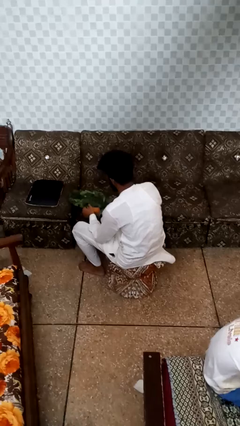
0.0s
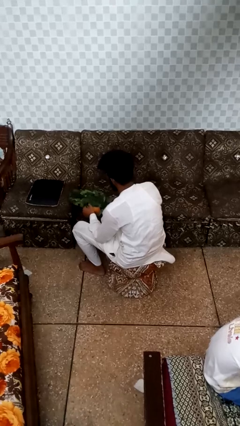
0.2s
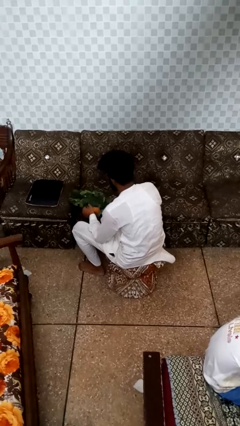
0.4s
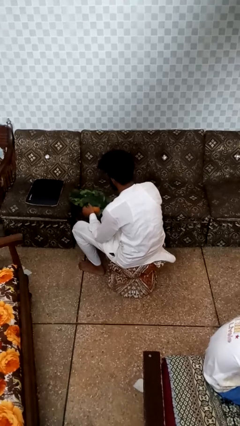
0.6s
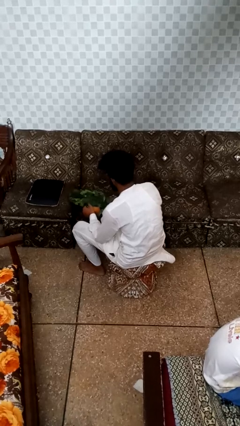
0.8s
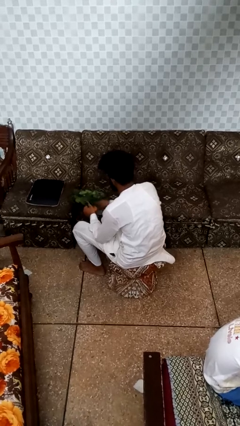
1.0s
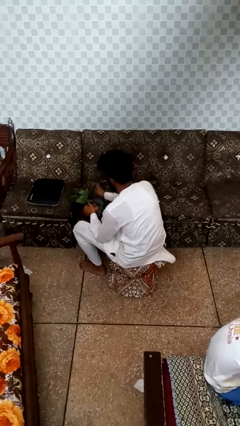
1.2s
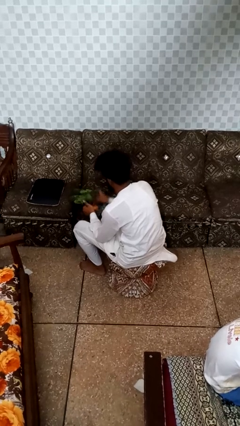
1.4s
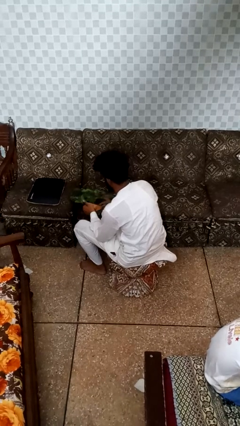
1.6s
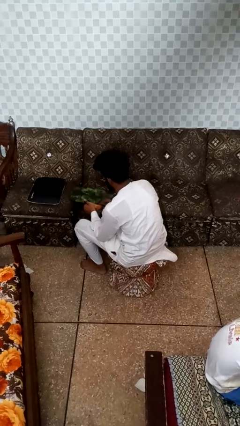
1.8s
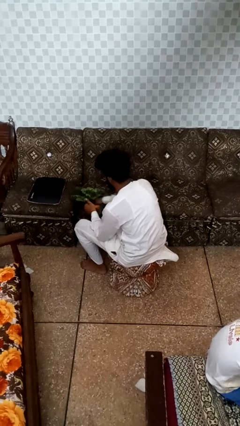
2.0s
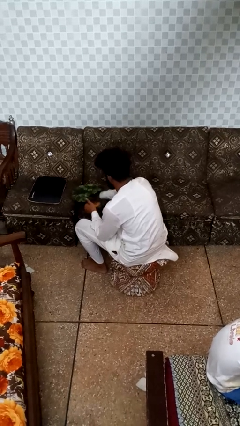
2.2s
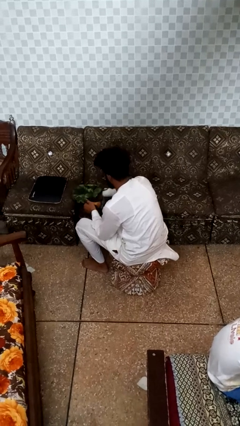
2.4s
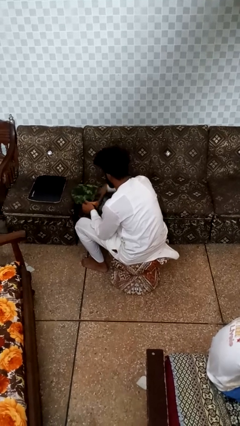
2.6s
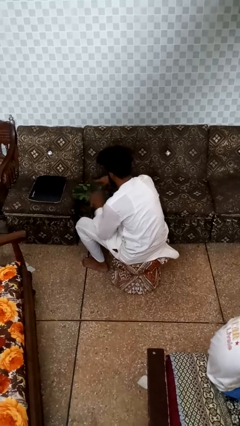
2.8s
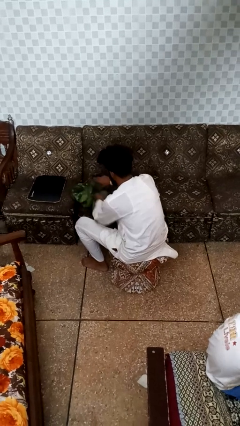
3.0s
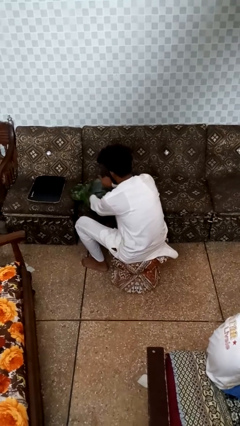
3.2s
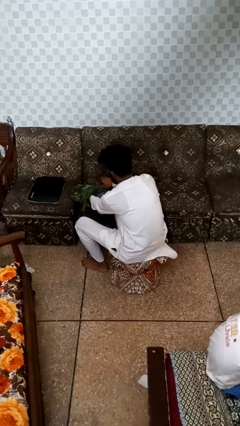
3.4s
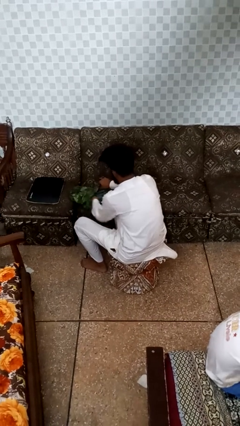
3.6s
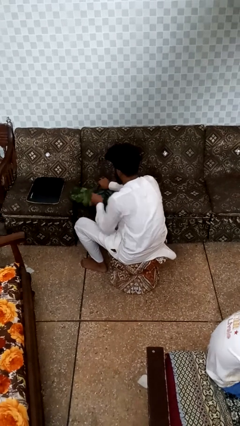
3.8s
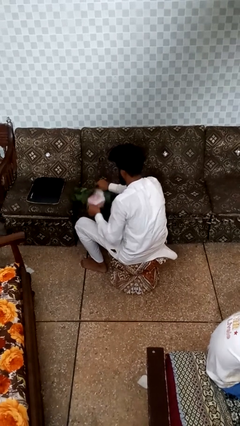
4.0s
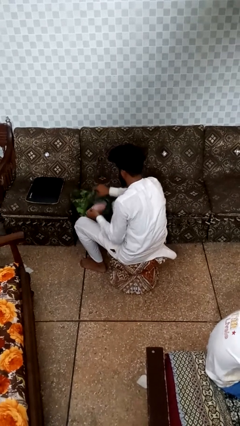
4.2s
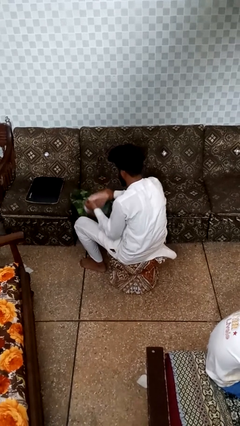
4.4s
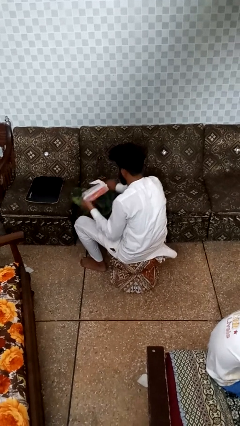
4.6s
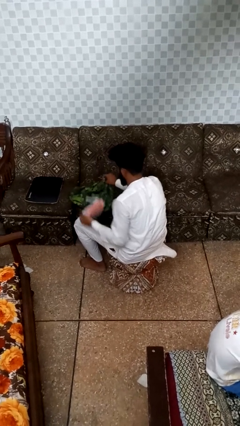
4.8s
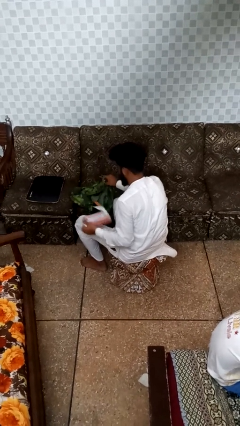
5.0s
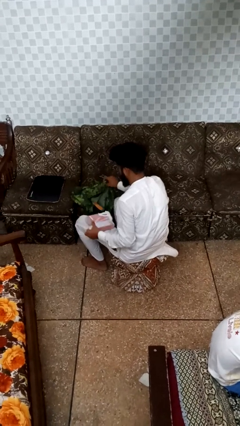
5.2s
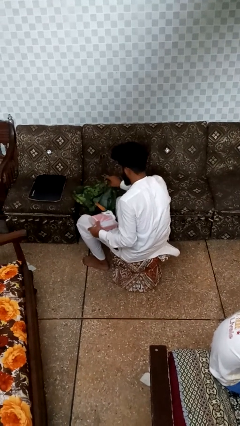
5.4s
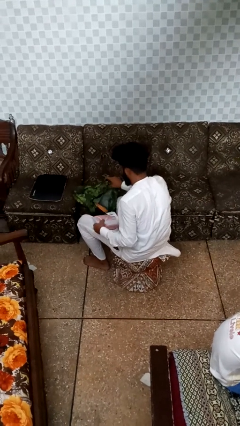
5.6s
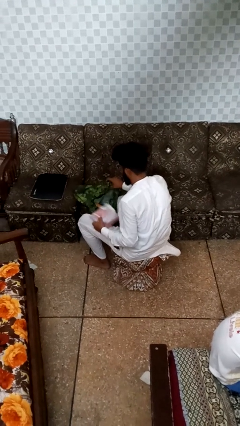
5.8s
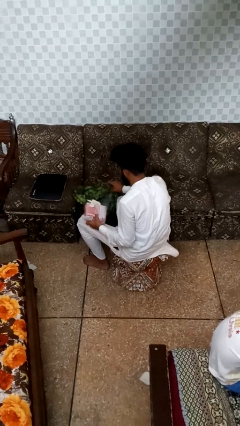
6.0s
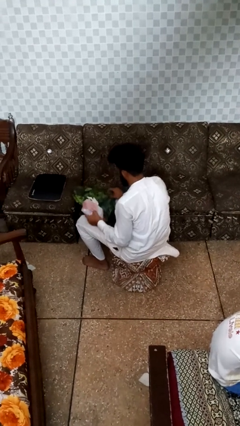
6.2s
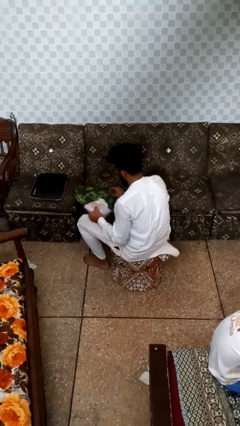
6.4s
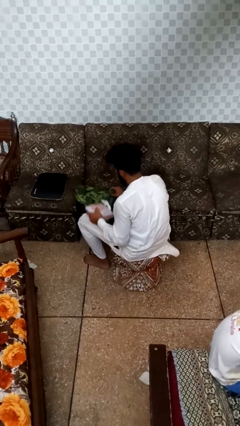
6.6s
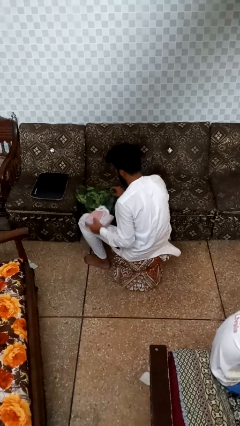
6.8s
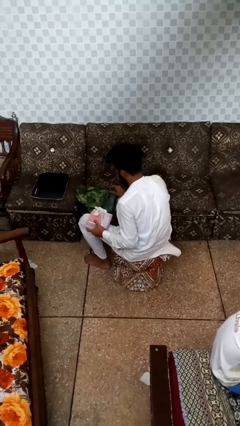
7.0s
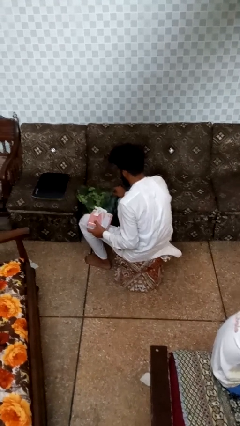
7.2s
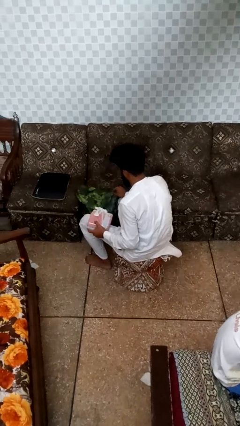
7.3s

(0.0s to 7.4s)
person takes object from bag

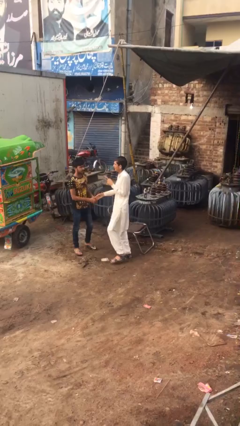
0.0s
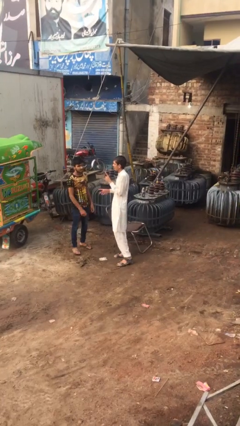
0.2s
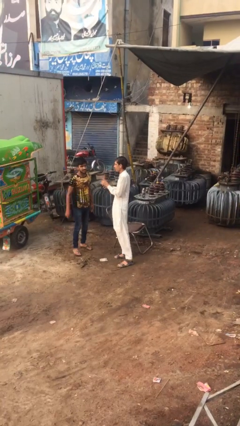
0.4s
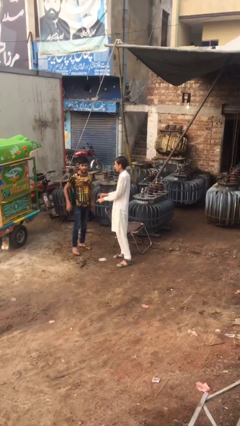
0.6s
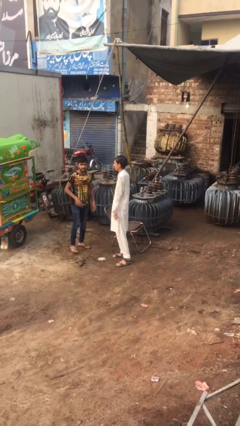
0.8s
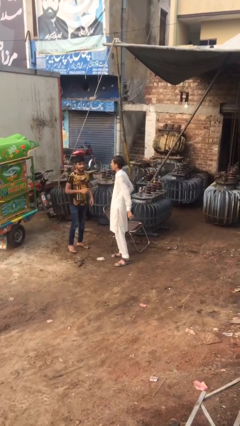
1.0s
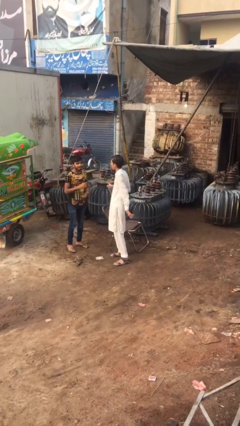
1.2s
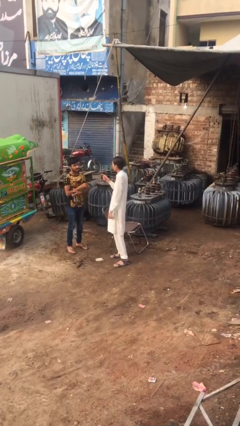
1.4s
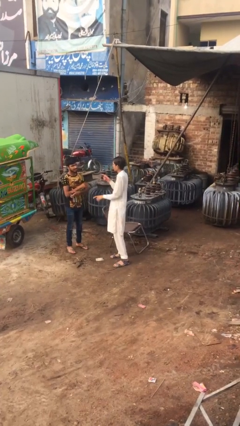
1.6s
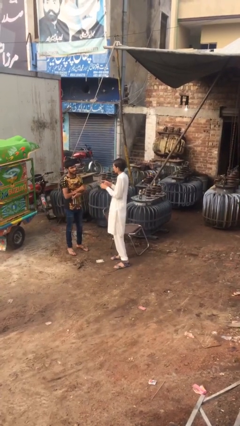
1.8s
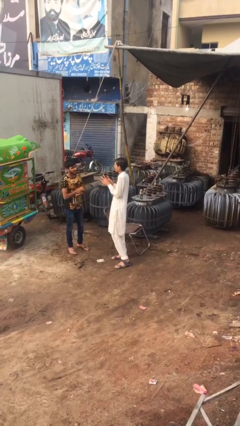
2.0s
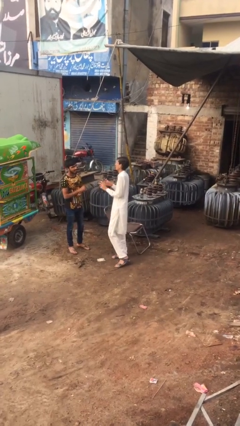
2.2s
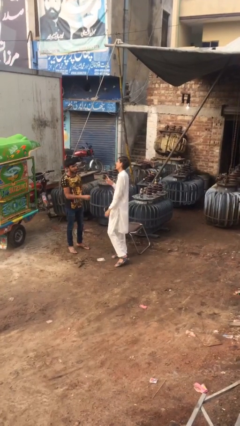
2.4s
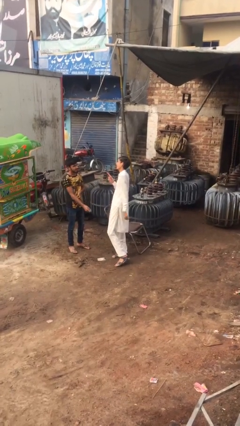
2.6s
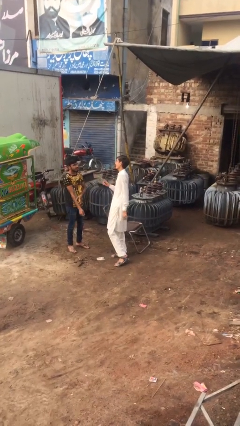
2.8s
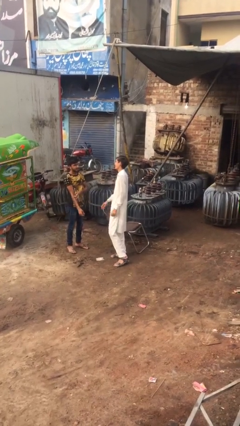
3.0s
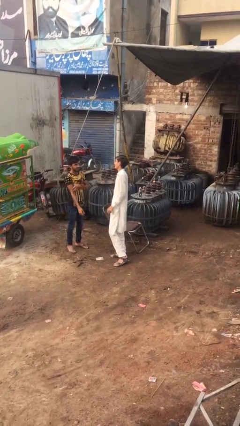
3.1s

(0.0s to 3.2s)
person talks to person

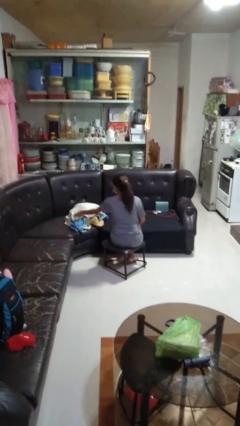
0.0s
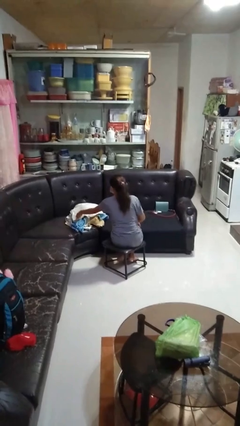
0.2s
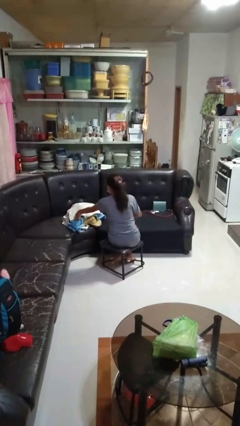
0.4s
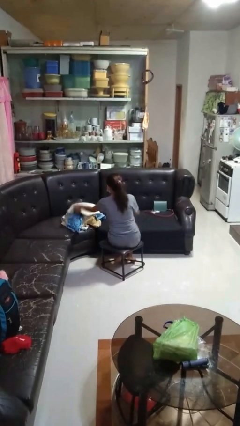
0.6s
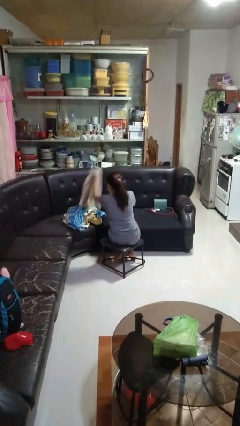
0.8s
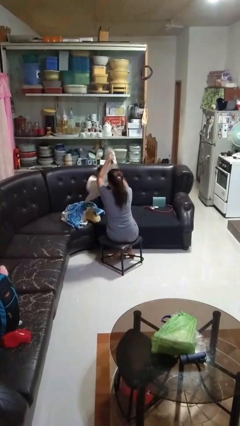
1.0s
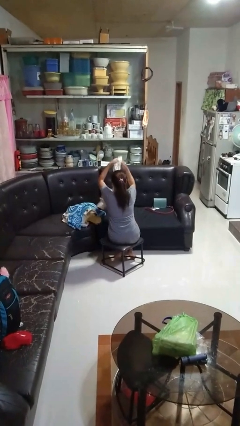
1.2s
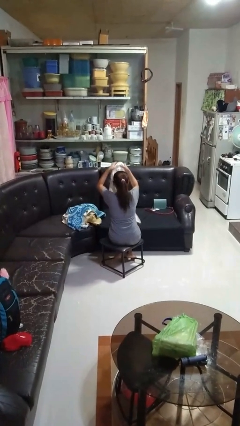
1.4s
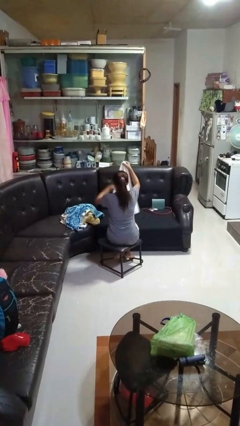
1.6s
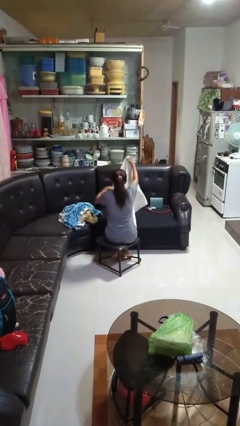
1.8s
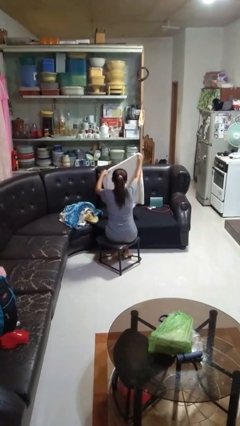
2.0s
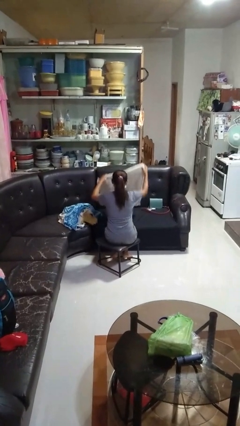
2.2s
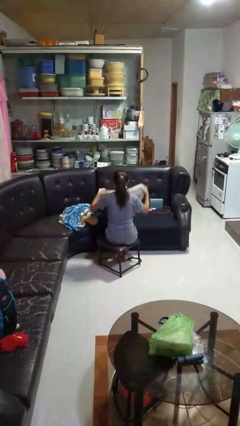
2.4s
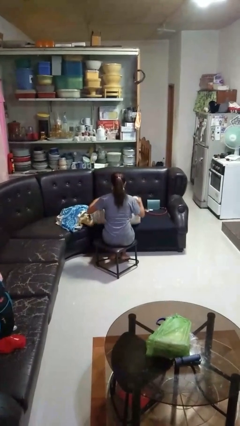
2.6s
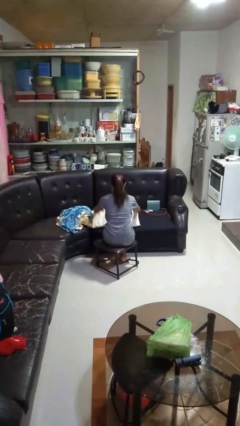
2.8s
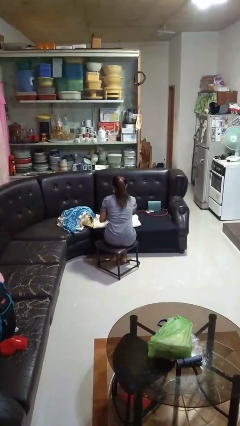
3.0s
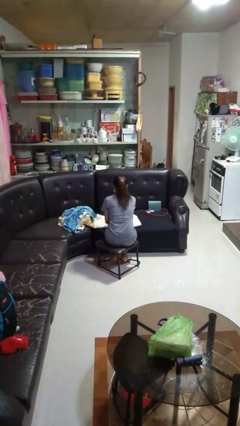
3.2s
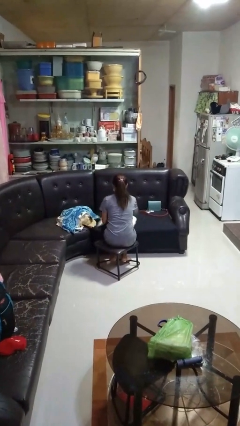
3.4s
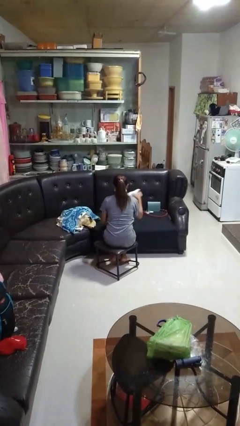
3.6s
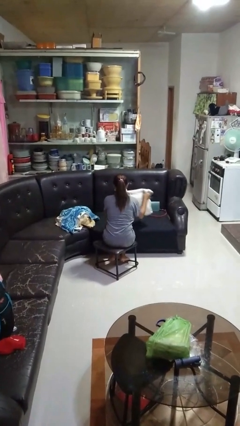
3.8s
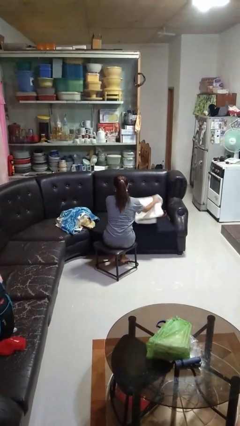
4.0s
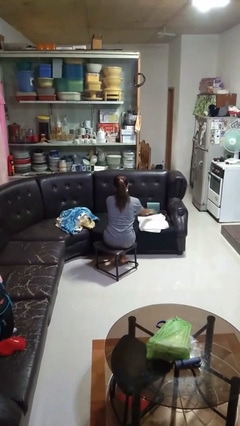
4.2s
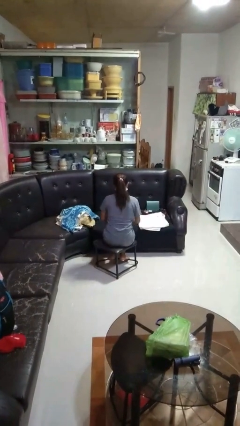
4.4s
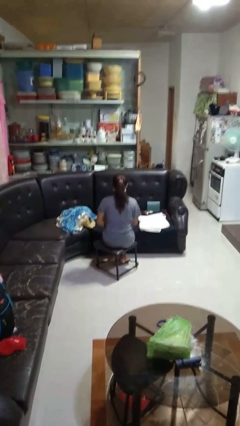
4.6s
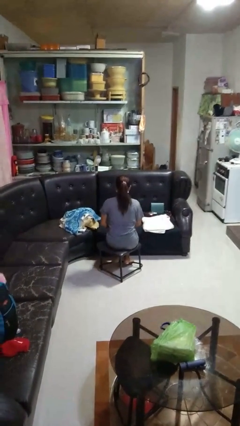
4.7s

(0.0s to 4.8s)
person folds towel

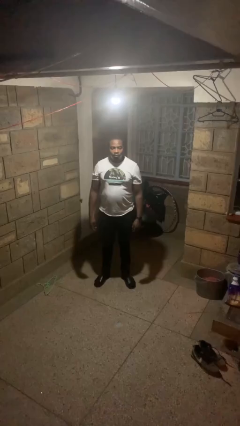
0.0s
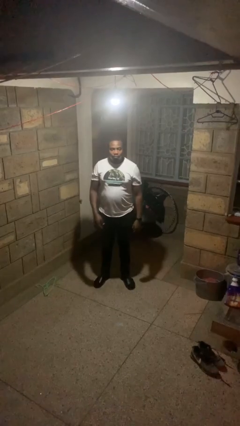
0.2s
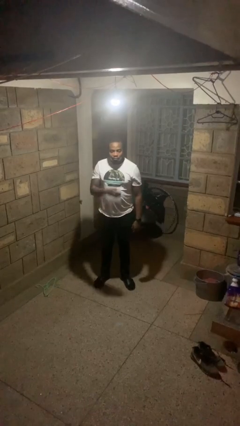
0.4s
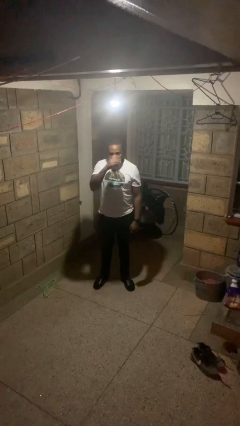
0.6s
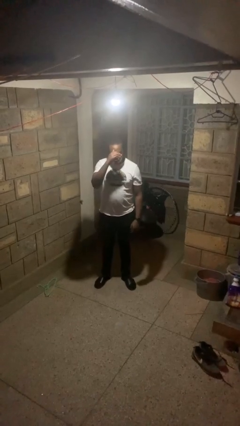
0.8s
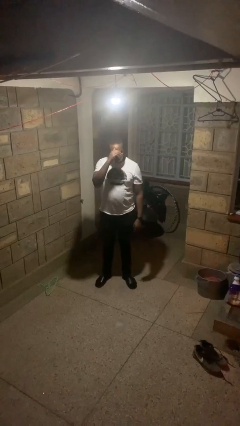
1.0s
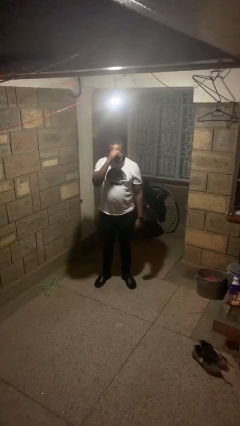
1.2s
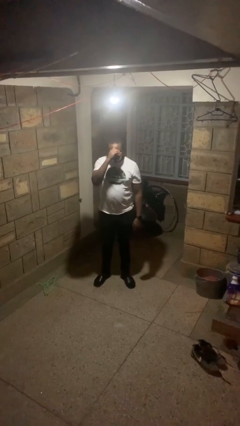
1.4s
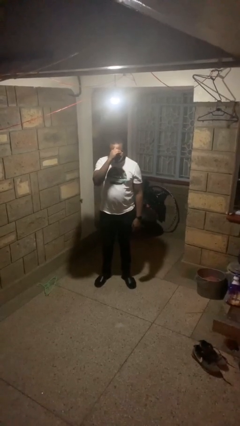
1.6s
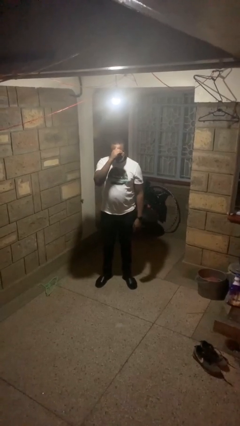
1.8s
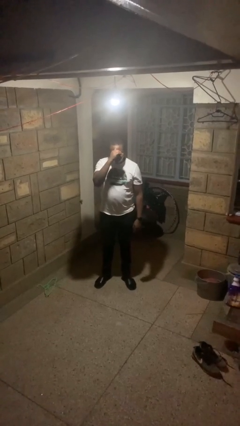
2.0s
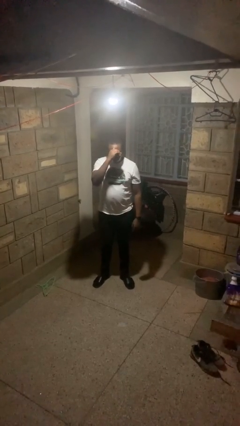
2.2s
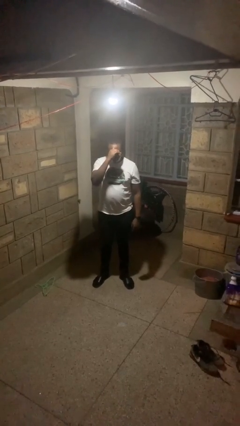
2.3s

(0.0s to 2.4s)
person shades eyes
